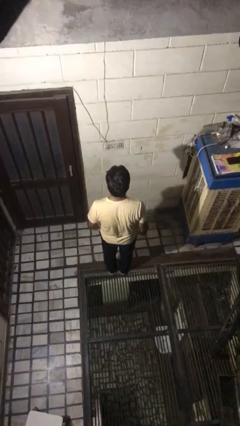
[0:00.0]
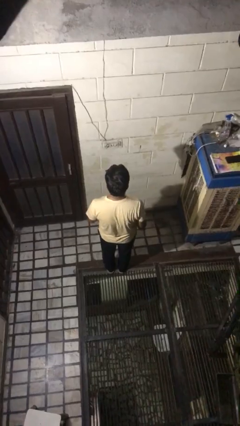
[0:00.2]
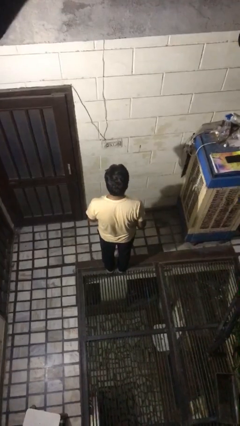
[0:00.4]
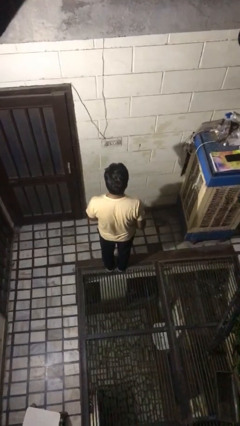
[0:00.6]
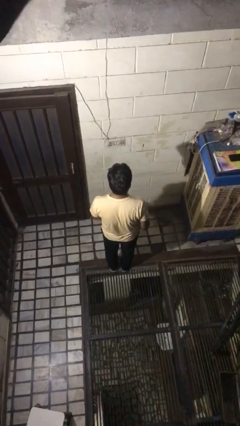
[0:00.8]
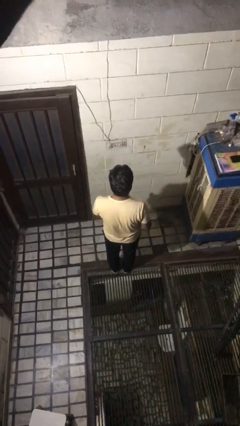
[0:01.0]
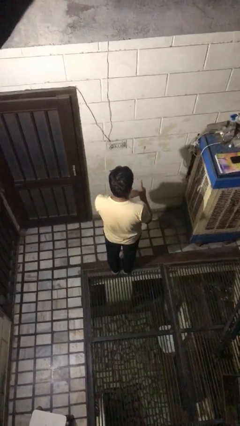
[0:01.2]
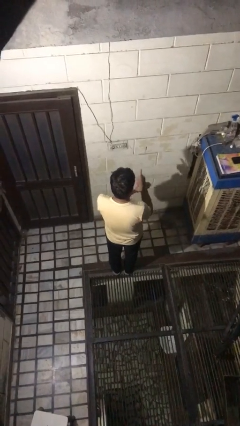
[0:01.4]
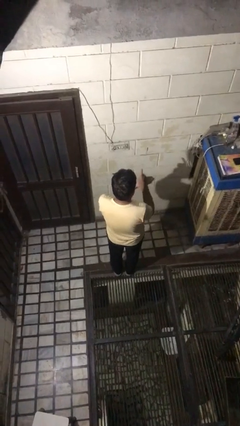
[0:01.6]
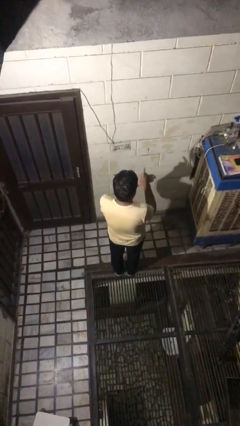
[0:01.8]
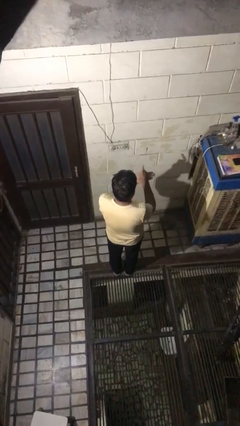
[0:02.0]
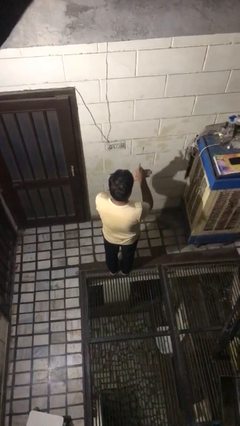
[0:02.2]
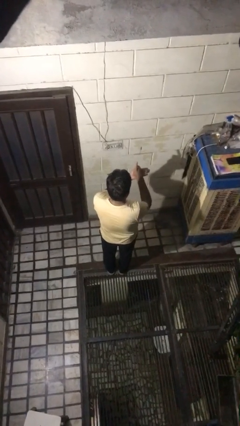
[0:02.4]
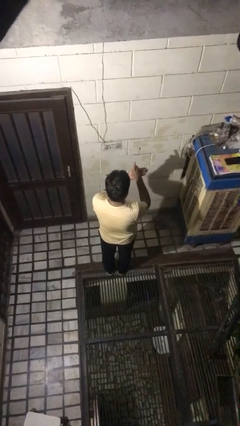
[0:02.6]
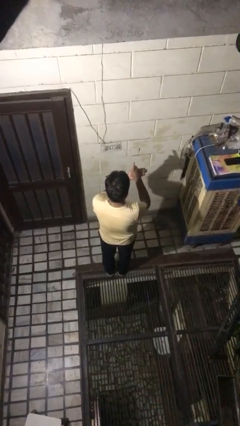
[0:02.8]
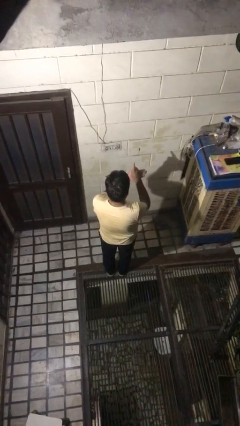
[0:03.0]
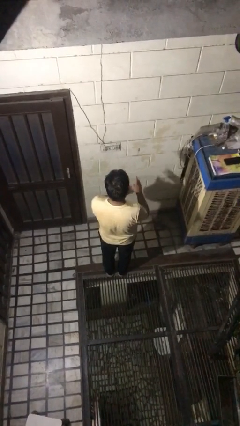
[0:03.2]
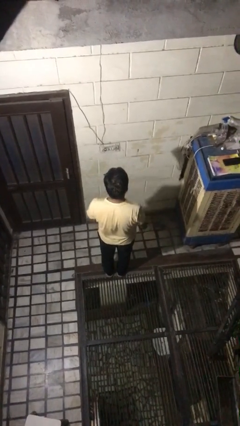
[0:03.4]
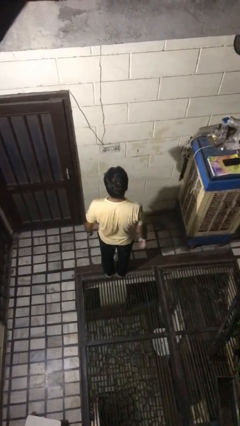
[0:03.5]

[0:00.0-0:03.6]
person gestures number one

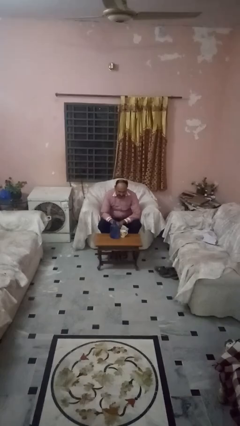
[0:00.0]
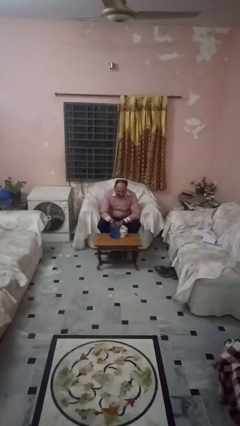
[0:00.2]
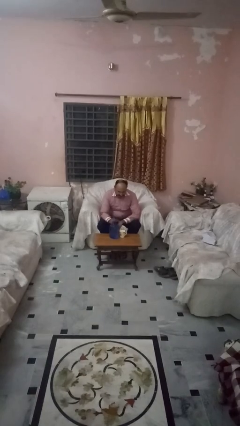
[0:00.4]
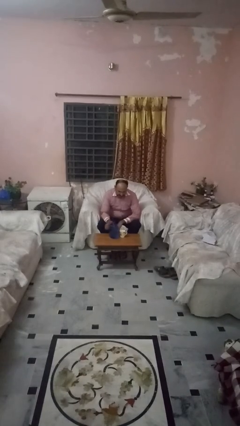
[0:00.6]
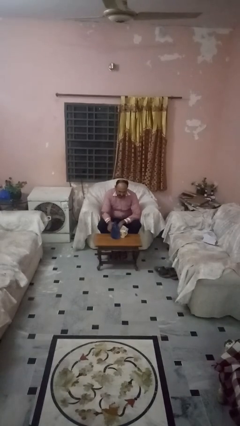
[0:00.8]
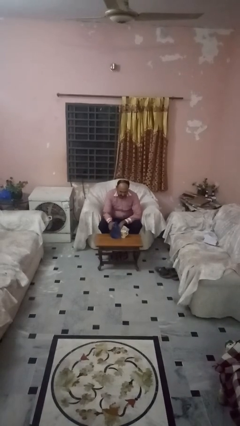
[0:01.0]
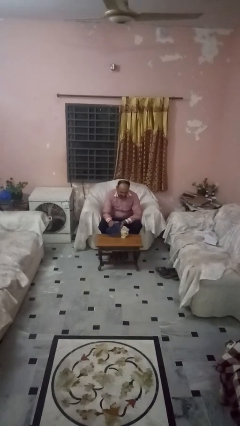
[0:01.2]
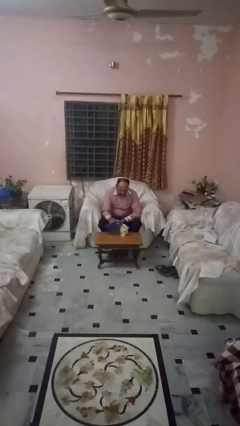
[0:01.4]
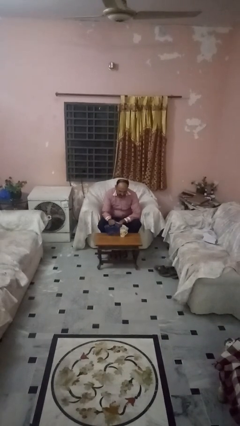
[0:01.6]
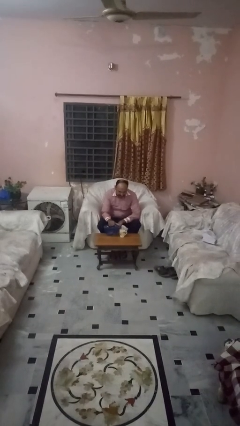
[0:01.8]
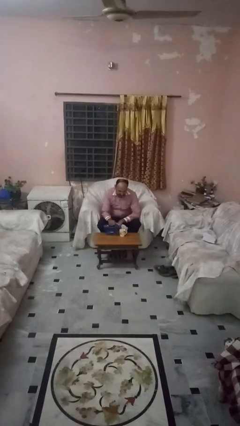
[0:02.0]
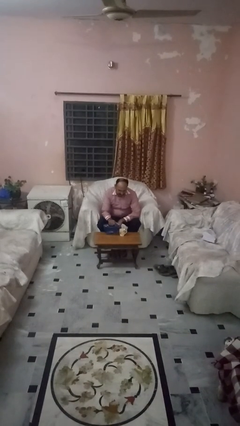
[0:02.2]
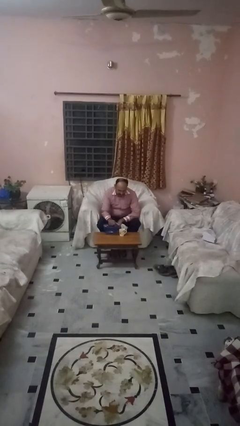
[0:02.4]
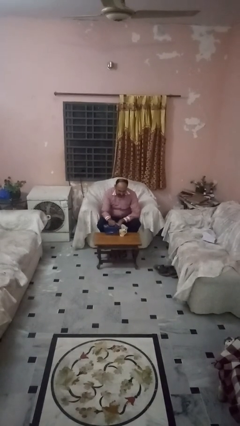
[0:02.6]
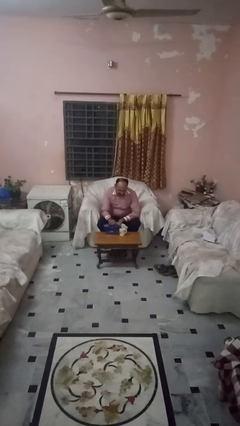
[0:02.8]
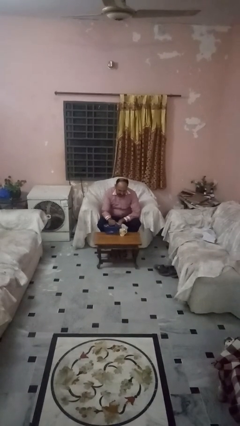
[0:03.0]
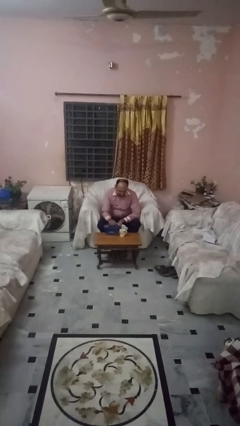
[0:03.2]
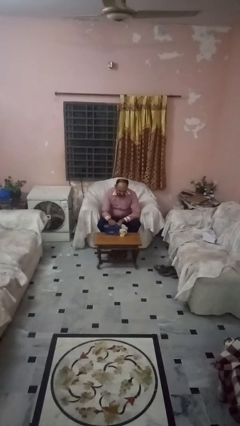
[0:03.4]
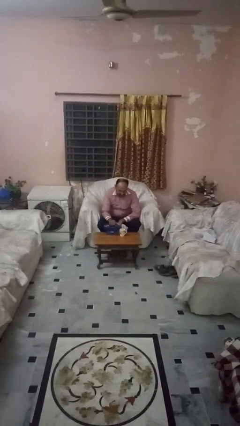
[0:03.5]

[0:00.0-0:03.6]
person pours liquid into cup

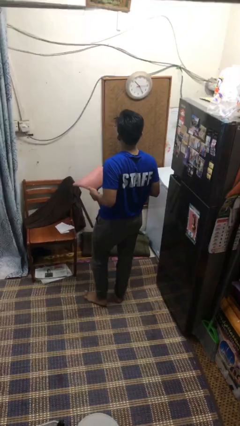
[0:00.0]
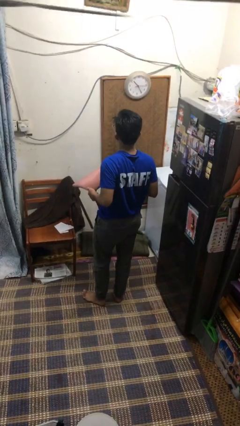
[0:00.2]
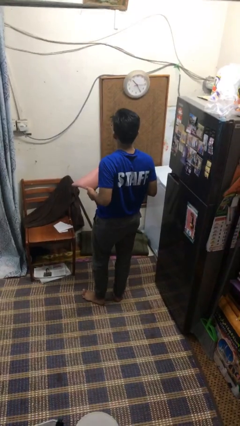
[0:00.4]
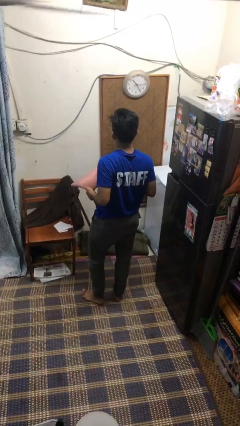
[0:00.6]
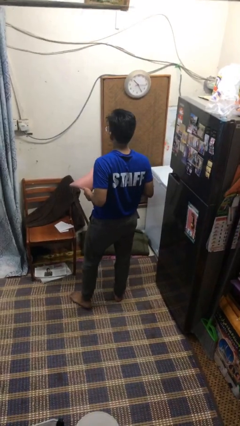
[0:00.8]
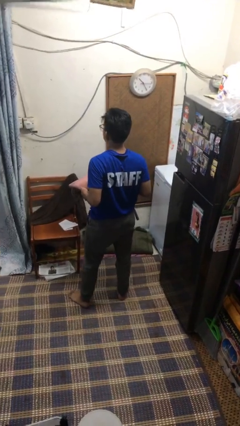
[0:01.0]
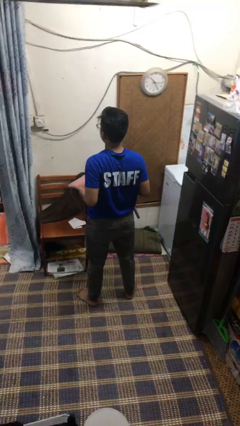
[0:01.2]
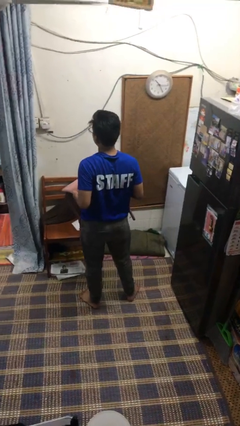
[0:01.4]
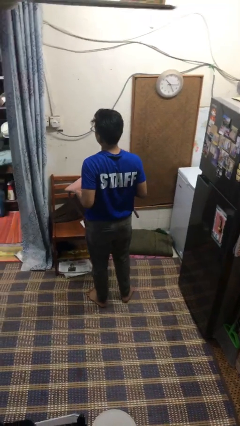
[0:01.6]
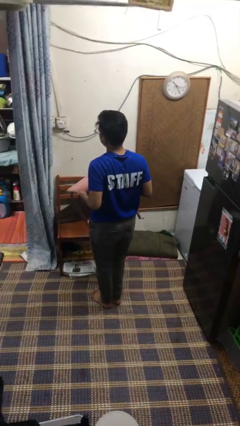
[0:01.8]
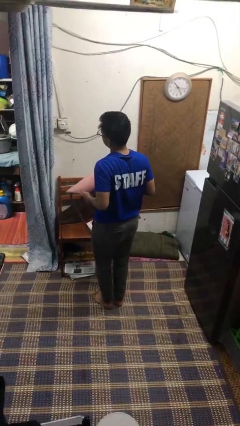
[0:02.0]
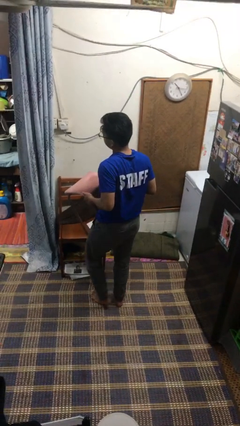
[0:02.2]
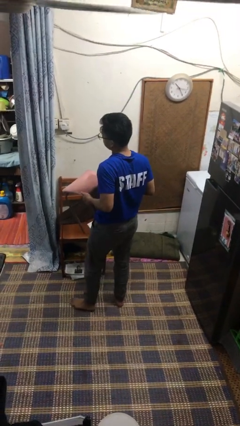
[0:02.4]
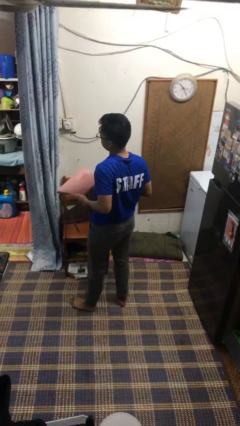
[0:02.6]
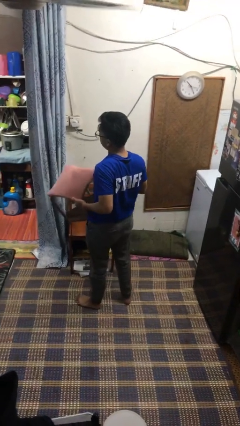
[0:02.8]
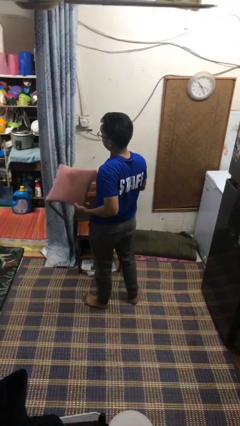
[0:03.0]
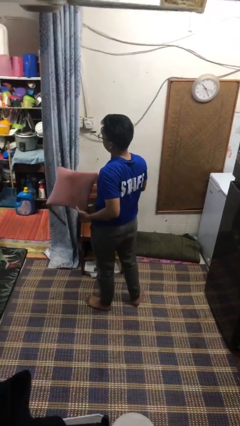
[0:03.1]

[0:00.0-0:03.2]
person carries furniture

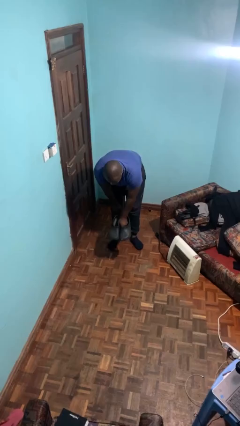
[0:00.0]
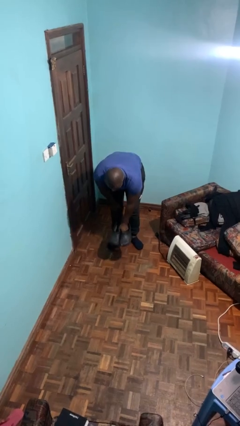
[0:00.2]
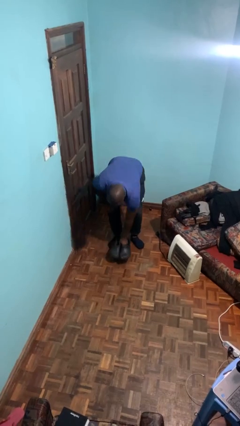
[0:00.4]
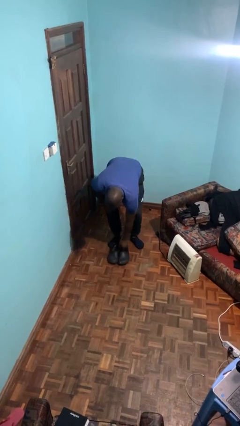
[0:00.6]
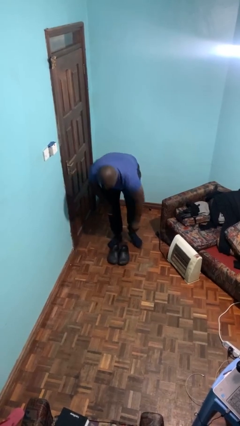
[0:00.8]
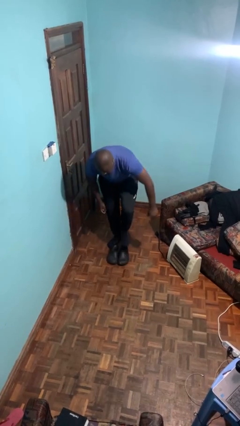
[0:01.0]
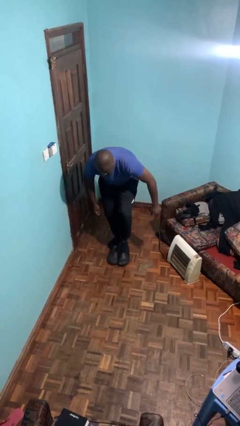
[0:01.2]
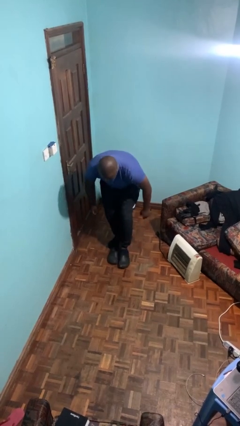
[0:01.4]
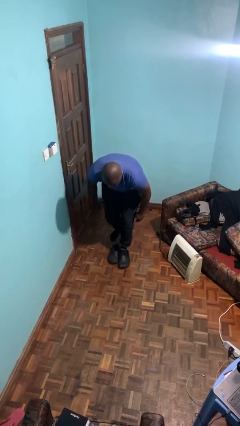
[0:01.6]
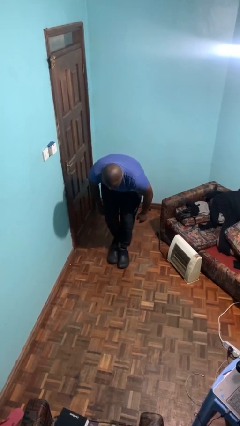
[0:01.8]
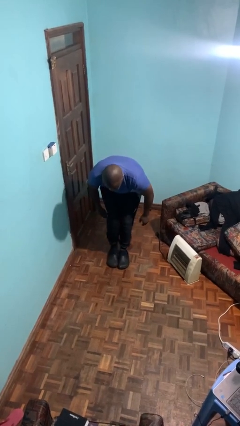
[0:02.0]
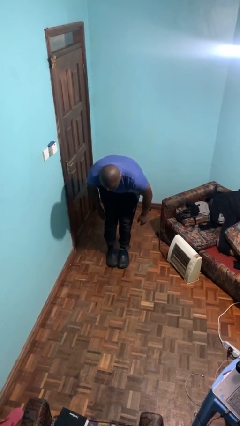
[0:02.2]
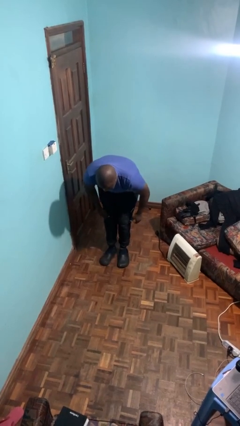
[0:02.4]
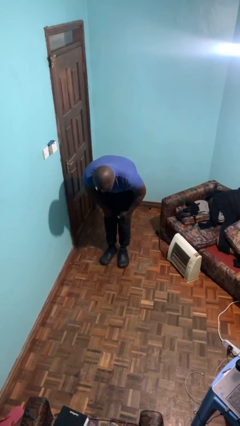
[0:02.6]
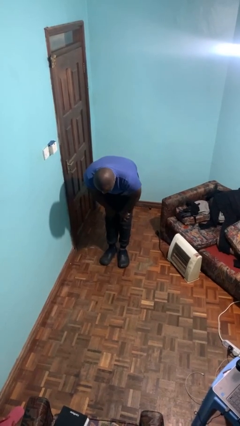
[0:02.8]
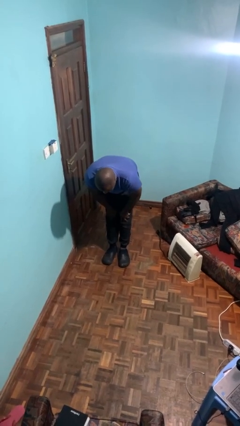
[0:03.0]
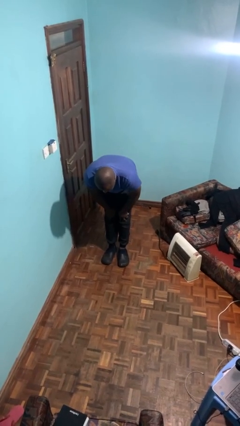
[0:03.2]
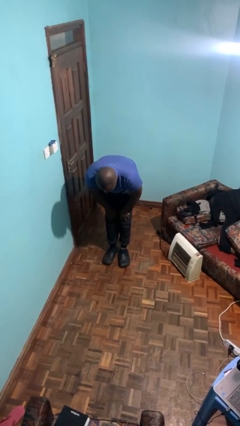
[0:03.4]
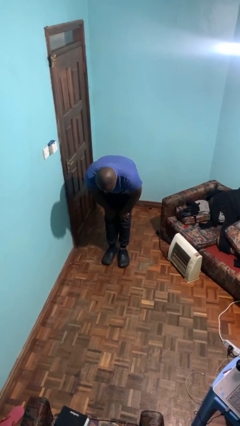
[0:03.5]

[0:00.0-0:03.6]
person puts on shoes

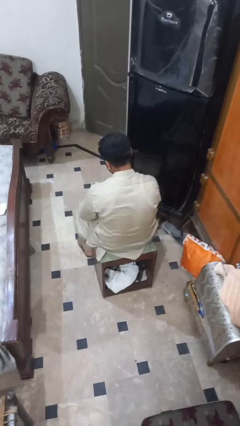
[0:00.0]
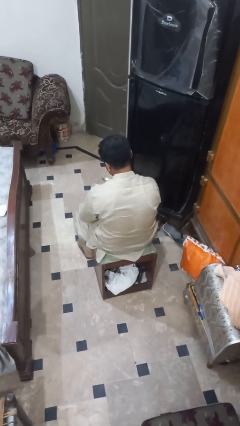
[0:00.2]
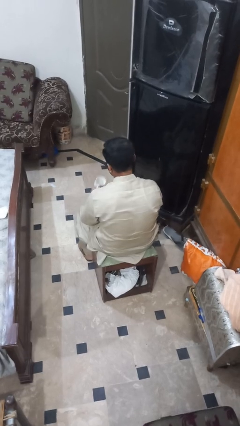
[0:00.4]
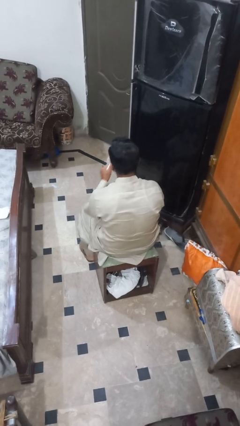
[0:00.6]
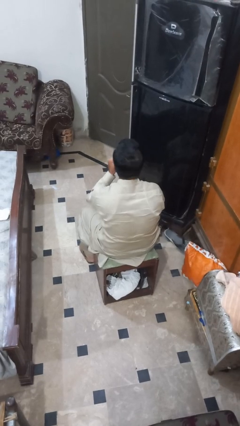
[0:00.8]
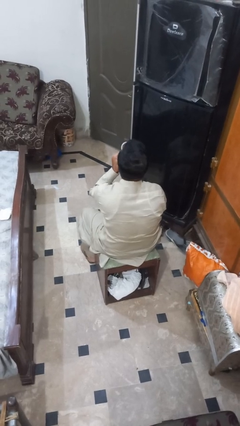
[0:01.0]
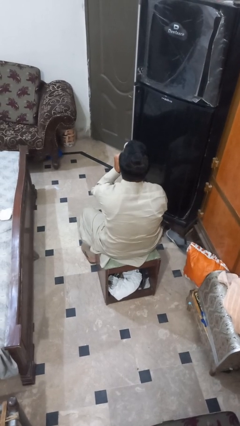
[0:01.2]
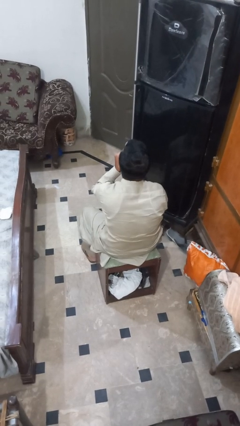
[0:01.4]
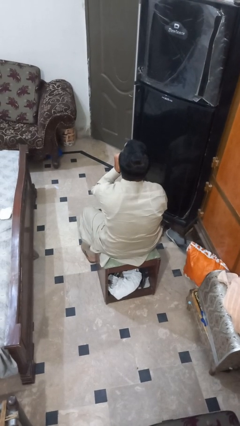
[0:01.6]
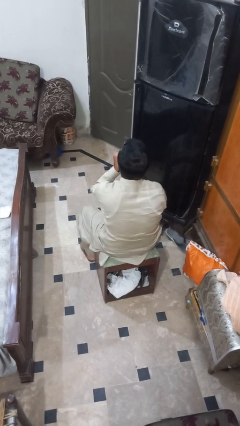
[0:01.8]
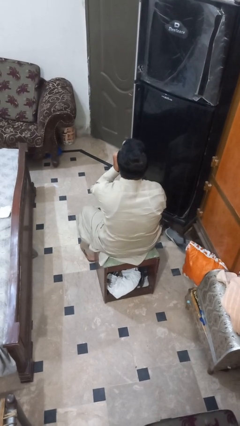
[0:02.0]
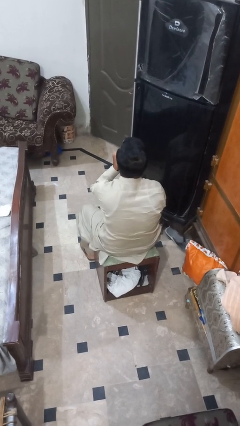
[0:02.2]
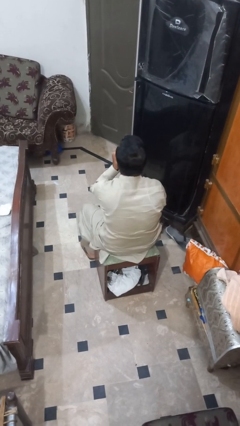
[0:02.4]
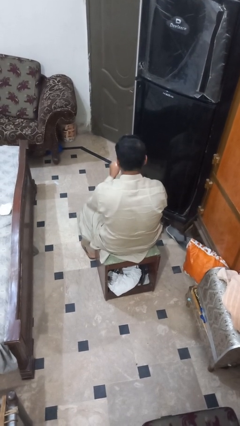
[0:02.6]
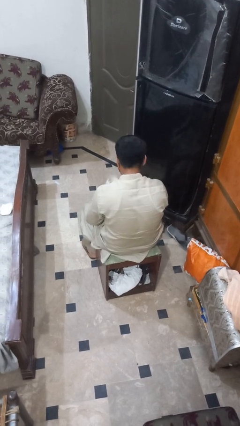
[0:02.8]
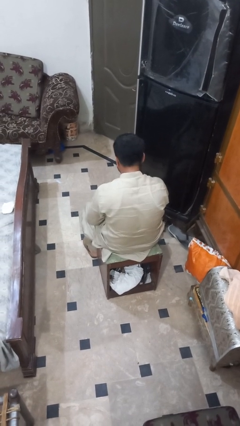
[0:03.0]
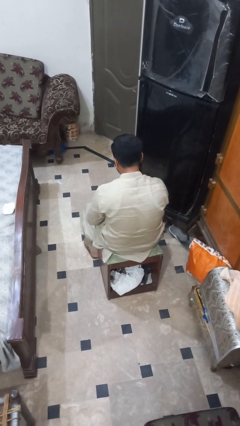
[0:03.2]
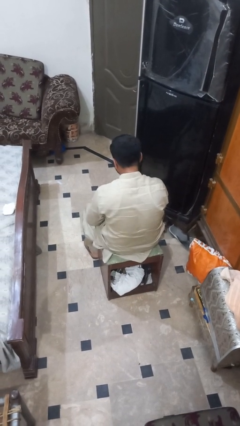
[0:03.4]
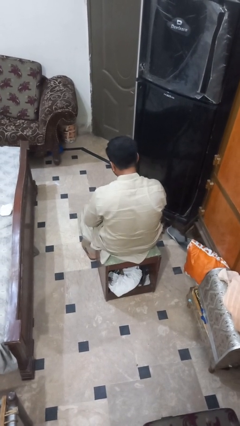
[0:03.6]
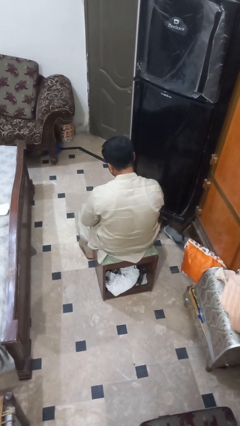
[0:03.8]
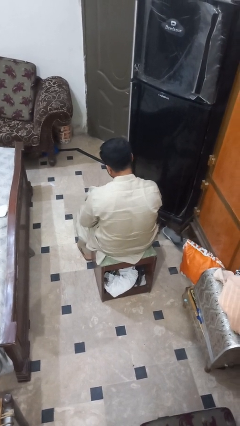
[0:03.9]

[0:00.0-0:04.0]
person drinks from mug
